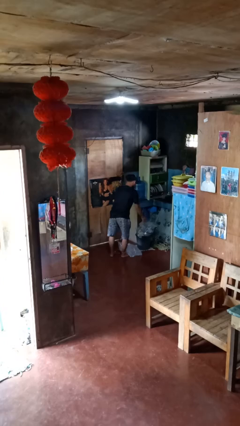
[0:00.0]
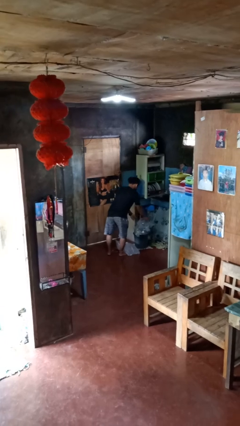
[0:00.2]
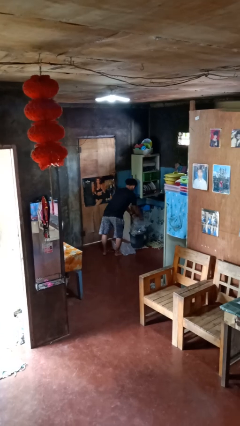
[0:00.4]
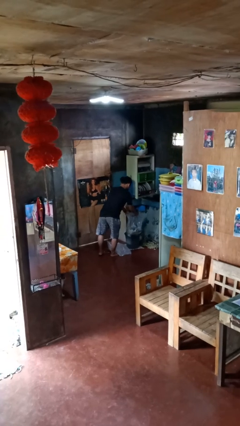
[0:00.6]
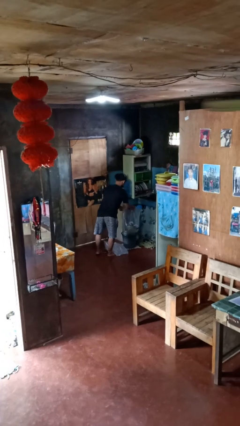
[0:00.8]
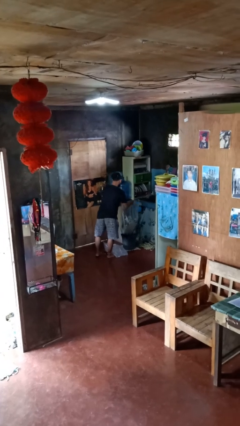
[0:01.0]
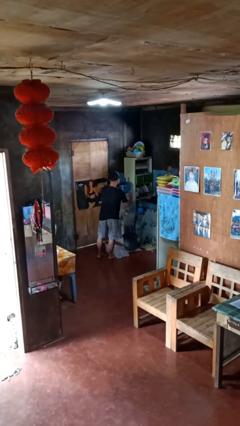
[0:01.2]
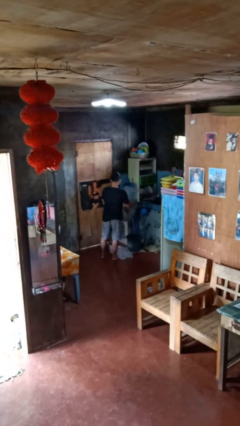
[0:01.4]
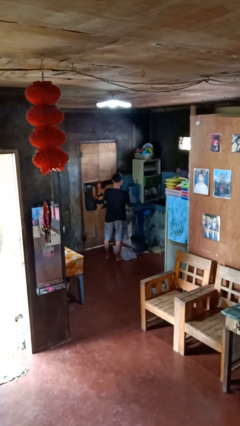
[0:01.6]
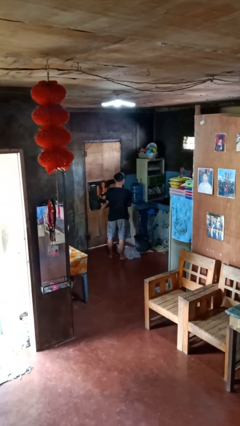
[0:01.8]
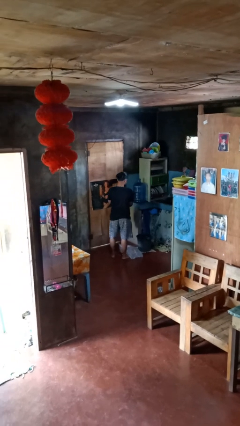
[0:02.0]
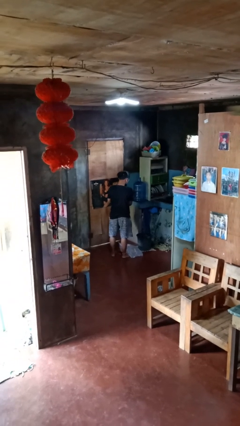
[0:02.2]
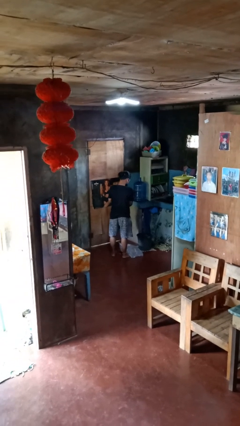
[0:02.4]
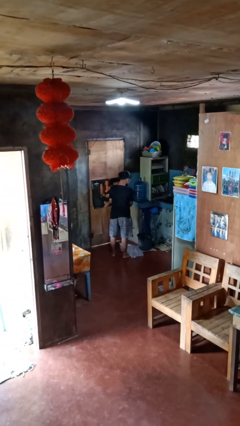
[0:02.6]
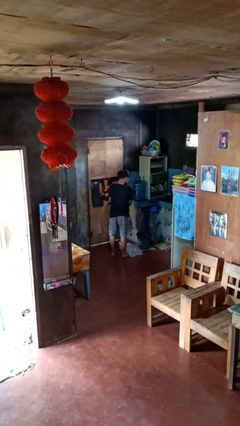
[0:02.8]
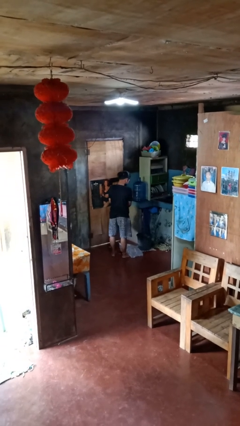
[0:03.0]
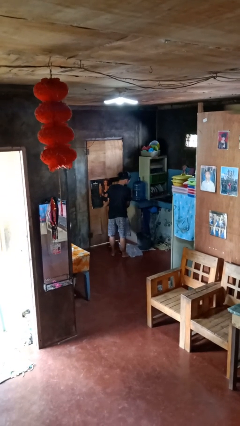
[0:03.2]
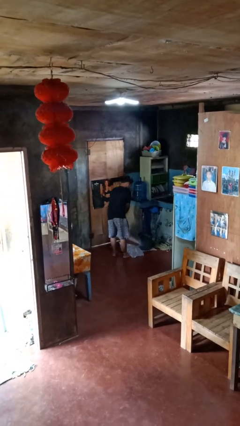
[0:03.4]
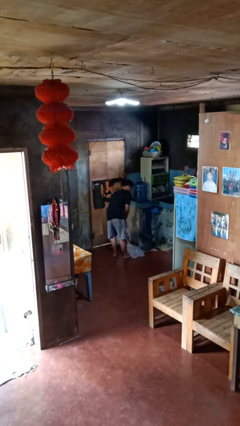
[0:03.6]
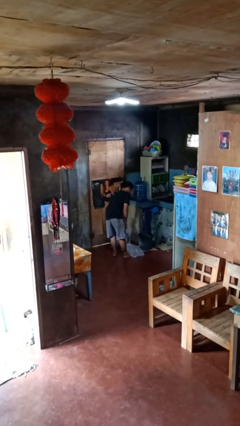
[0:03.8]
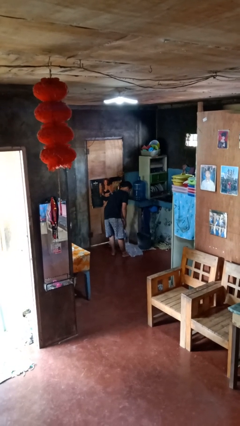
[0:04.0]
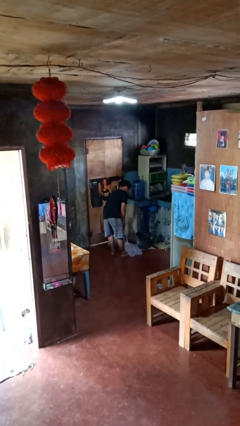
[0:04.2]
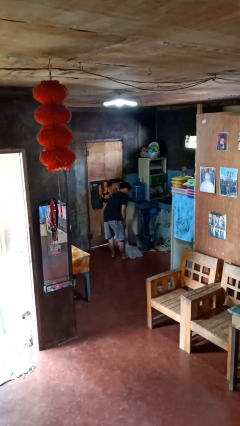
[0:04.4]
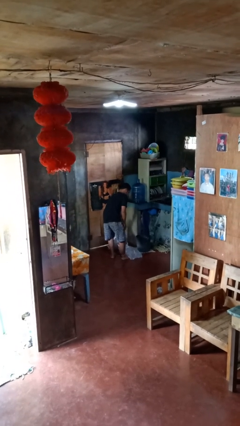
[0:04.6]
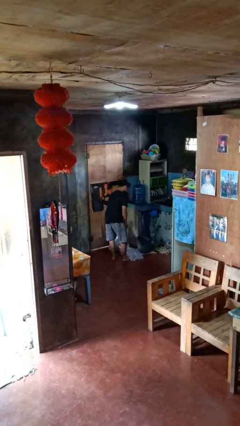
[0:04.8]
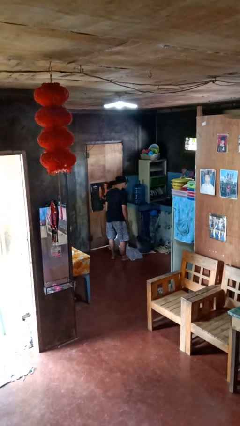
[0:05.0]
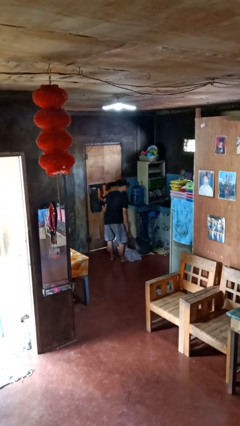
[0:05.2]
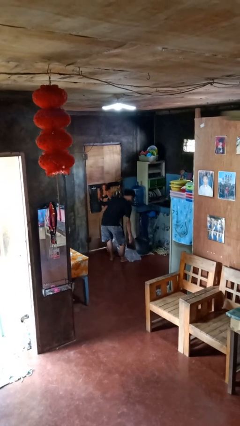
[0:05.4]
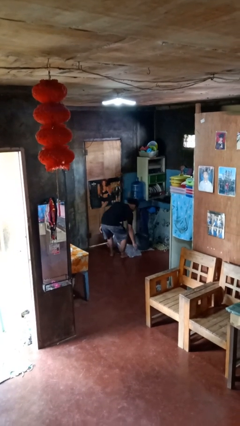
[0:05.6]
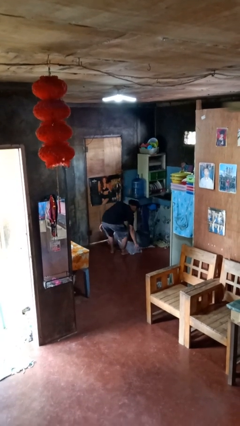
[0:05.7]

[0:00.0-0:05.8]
person removes trashbag from trashcan

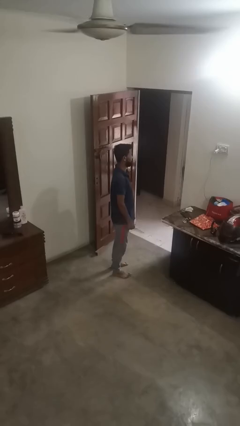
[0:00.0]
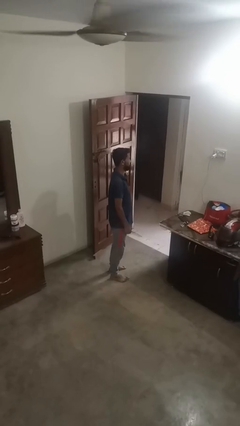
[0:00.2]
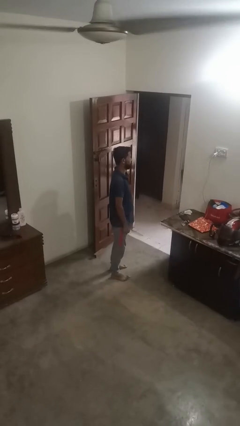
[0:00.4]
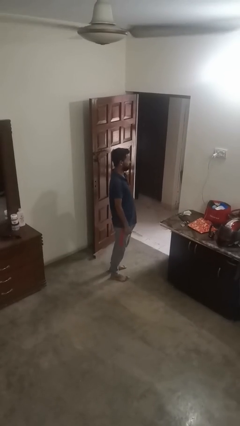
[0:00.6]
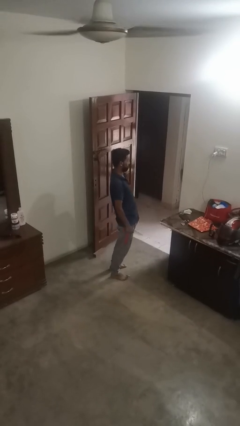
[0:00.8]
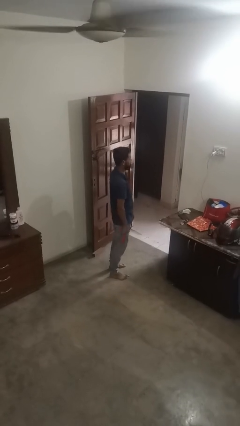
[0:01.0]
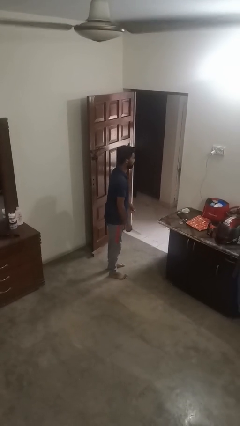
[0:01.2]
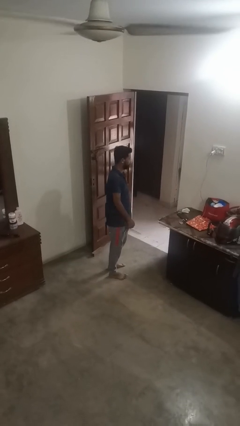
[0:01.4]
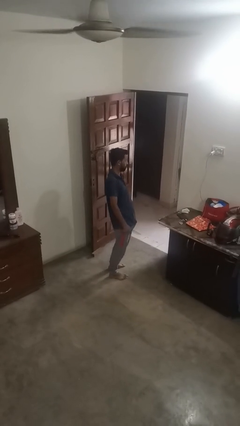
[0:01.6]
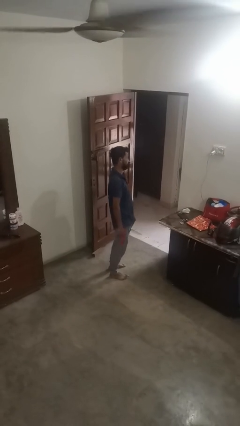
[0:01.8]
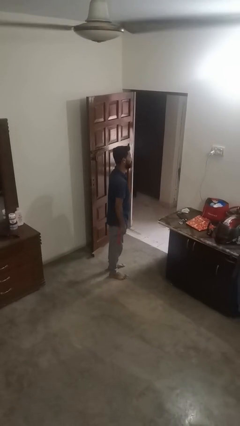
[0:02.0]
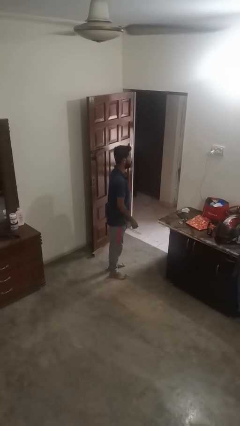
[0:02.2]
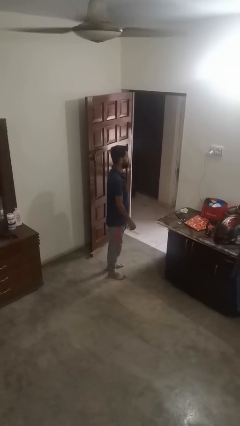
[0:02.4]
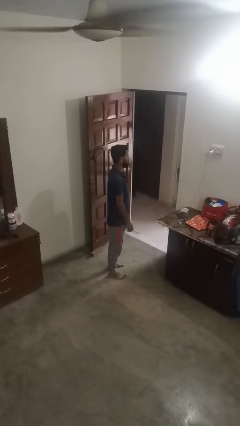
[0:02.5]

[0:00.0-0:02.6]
person wiggles hips

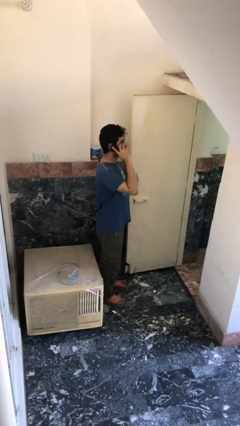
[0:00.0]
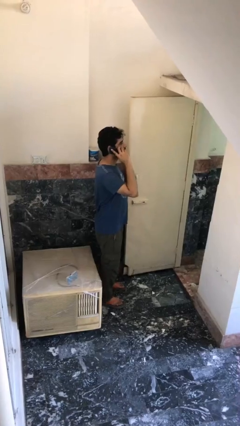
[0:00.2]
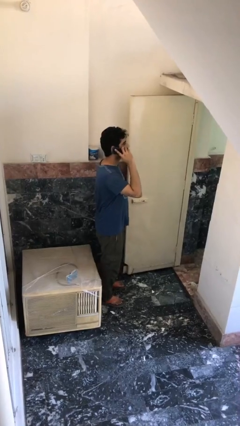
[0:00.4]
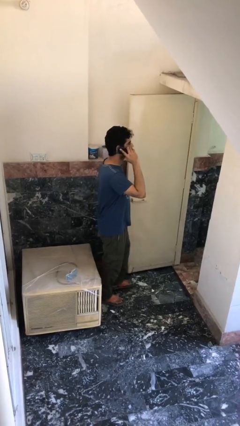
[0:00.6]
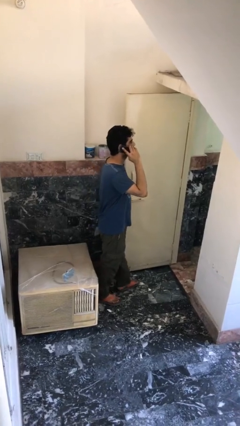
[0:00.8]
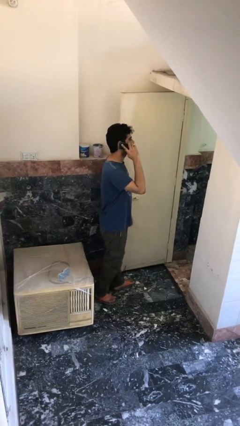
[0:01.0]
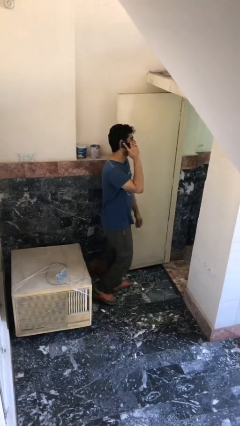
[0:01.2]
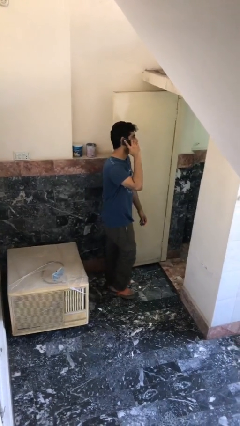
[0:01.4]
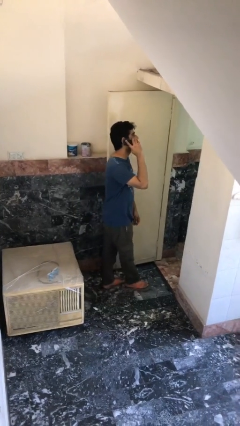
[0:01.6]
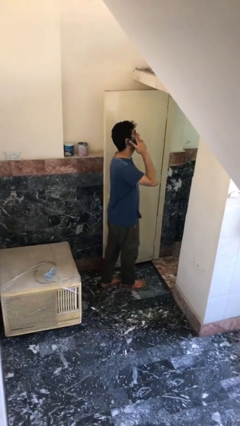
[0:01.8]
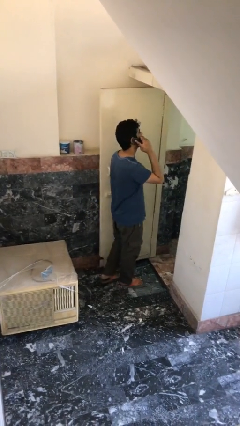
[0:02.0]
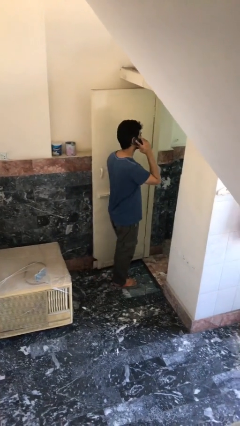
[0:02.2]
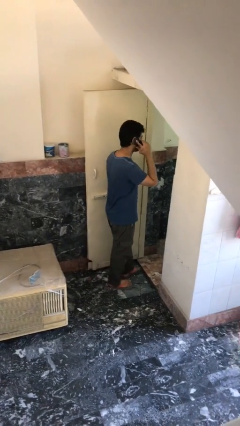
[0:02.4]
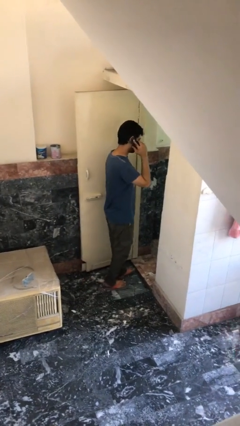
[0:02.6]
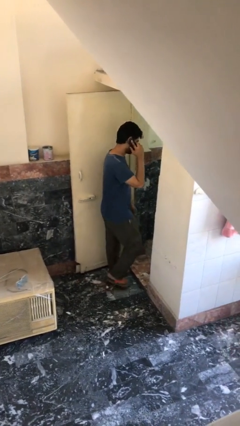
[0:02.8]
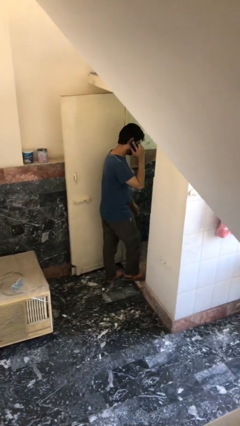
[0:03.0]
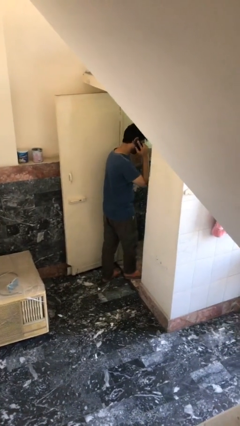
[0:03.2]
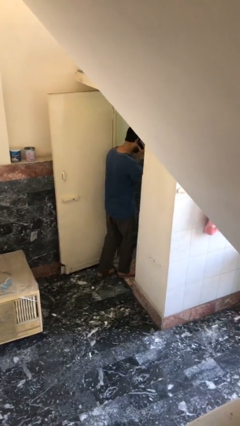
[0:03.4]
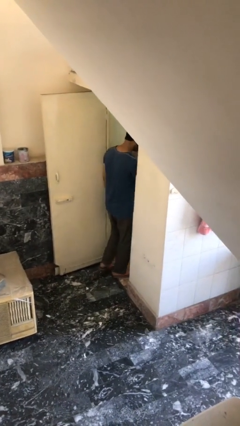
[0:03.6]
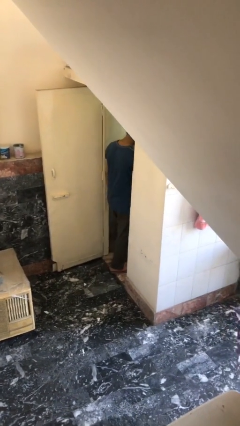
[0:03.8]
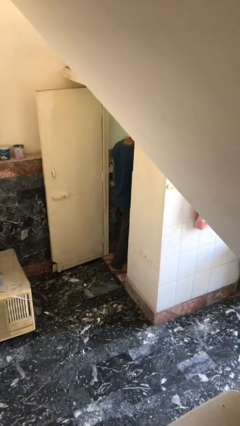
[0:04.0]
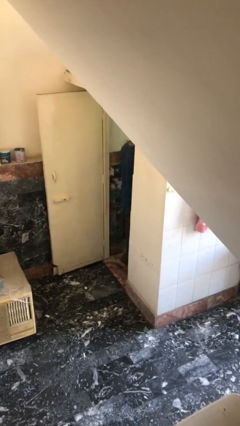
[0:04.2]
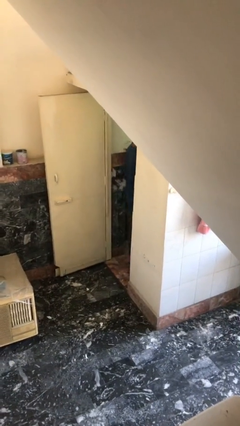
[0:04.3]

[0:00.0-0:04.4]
person exits scene through structure

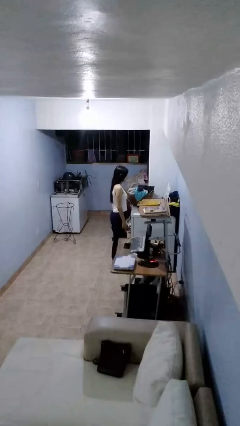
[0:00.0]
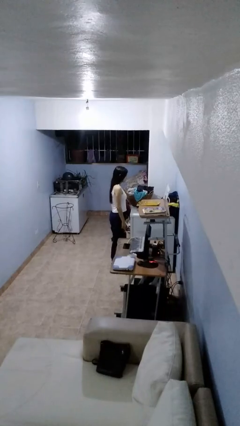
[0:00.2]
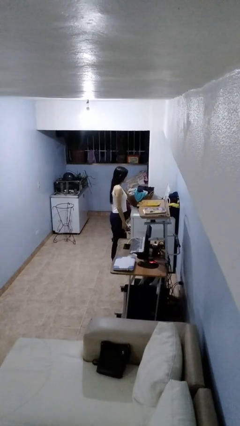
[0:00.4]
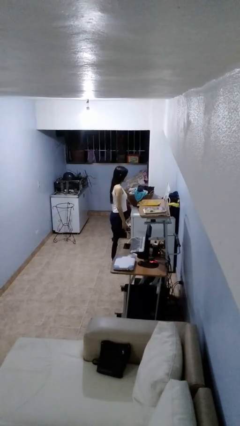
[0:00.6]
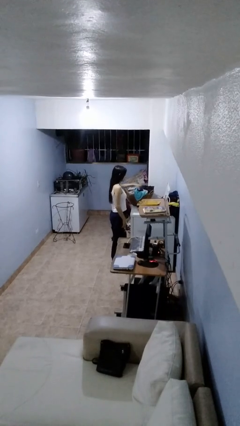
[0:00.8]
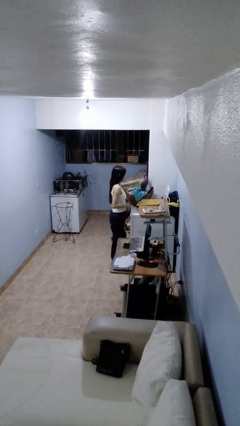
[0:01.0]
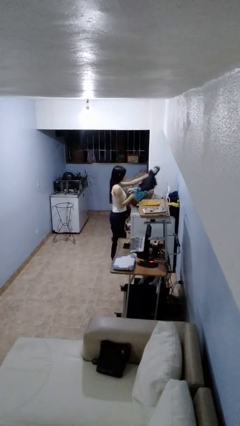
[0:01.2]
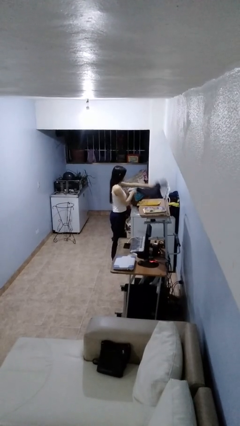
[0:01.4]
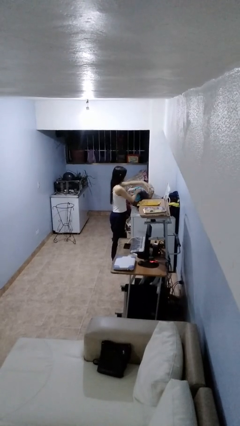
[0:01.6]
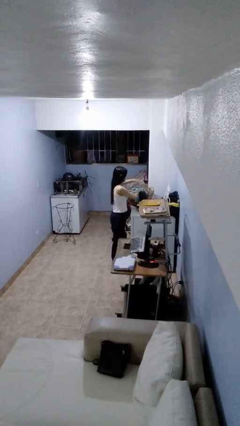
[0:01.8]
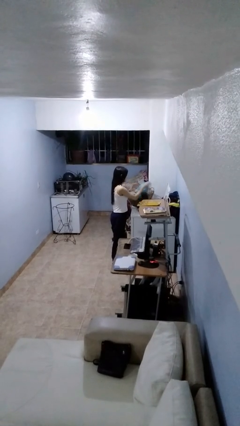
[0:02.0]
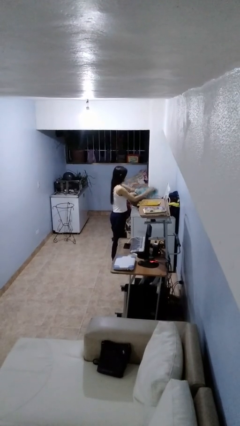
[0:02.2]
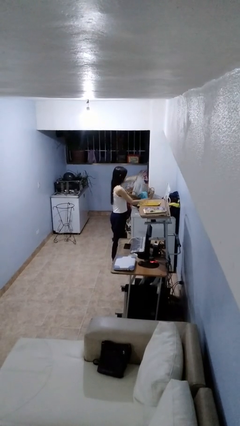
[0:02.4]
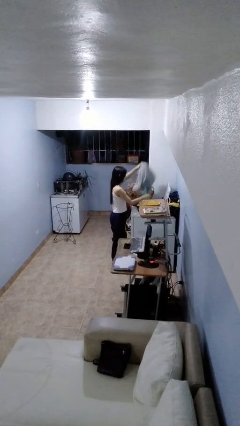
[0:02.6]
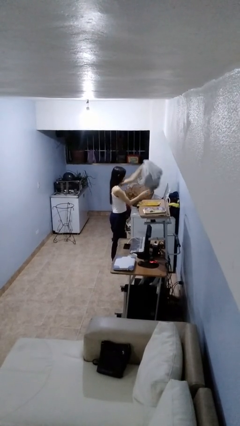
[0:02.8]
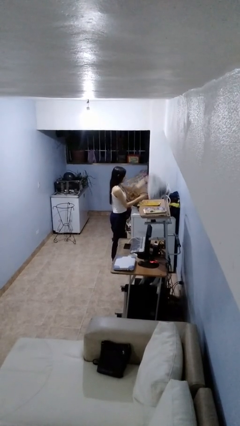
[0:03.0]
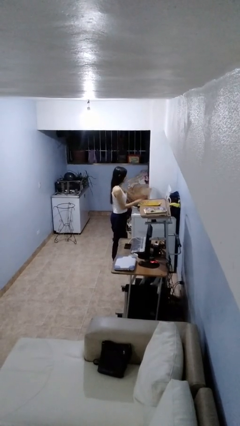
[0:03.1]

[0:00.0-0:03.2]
person loads clotheswasher

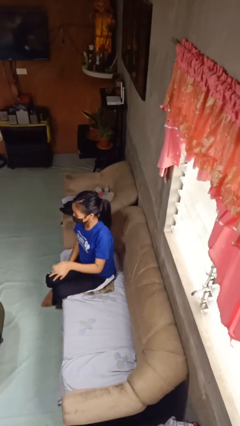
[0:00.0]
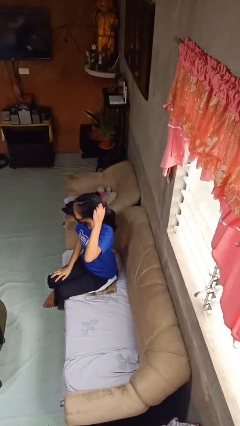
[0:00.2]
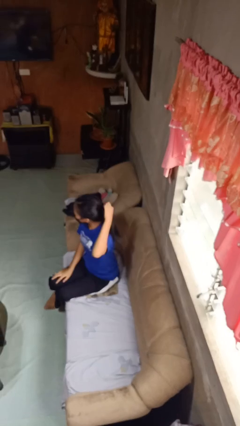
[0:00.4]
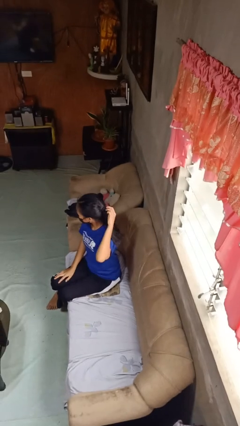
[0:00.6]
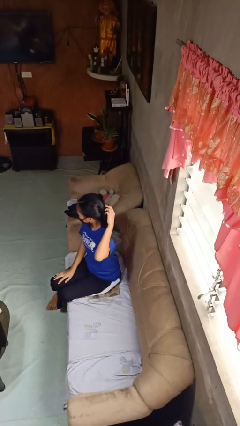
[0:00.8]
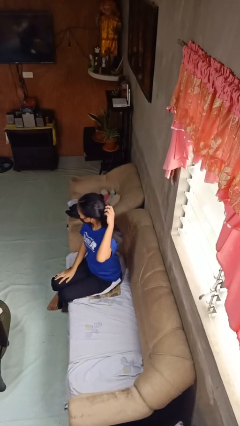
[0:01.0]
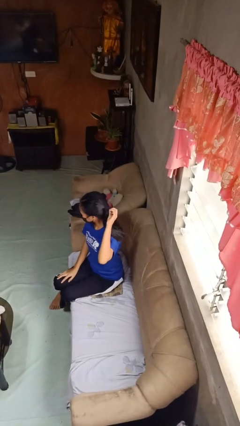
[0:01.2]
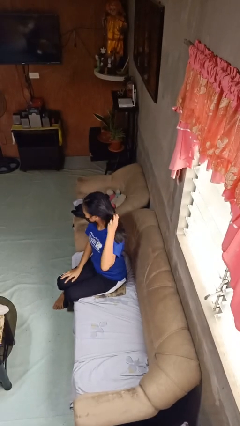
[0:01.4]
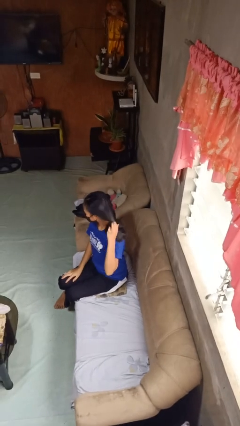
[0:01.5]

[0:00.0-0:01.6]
person takes off hairtie

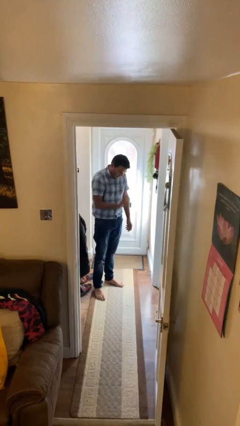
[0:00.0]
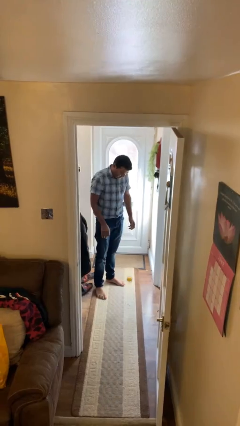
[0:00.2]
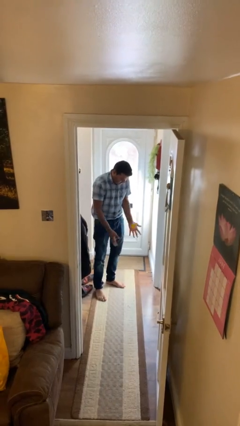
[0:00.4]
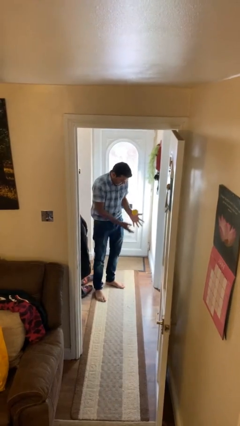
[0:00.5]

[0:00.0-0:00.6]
person bounces ball on floor
